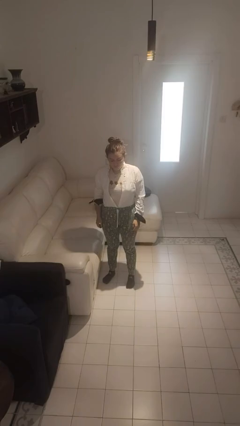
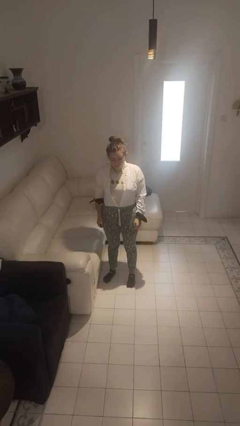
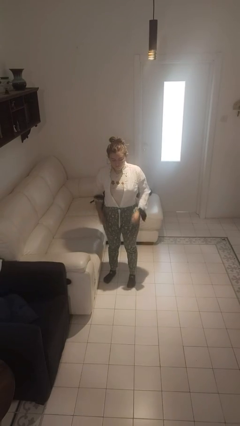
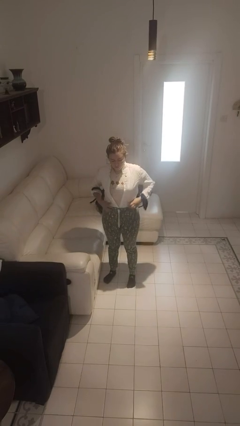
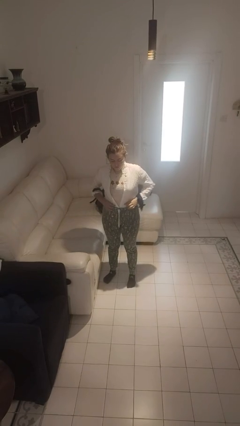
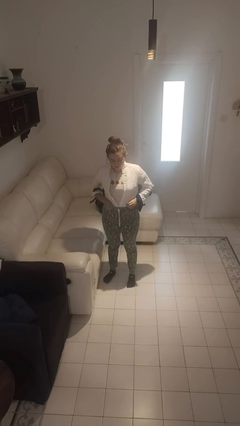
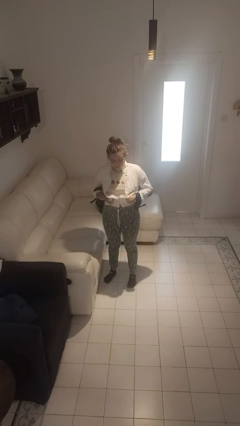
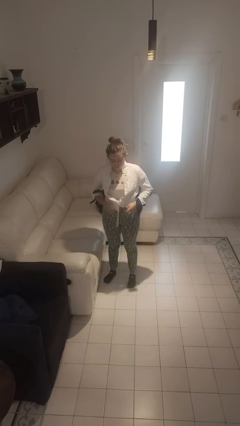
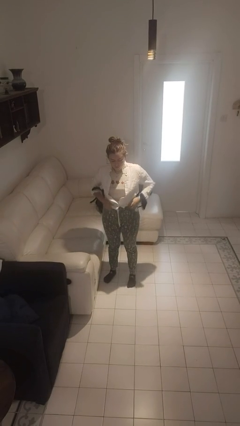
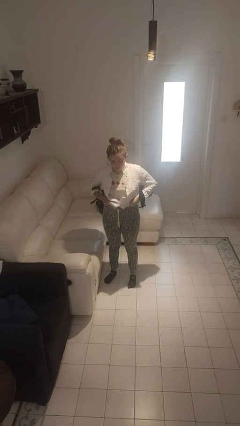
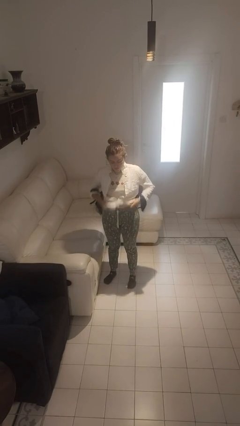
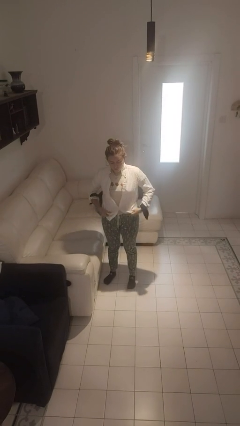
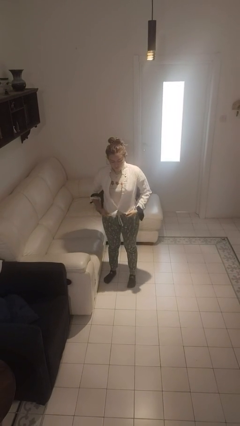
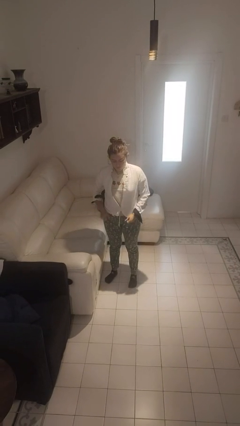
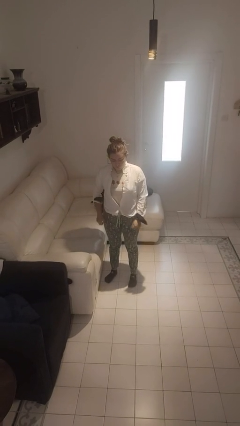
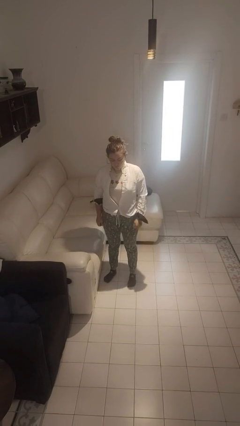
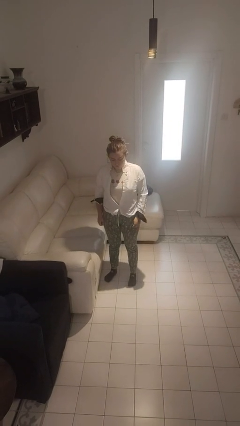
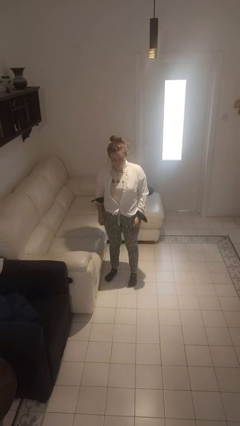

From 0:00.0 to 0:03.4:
person untucks shirt

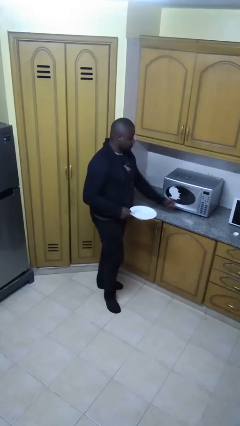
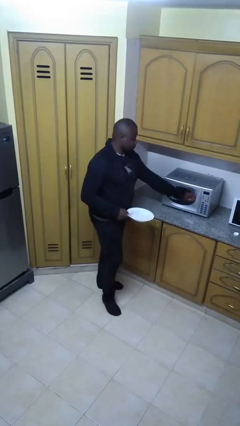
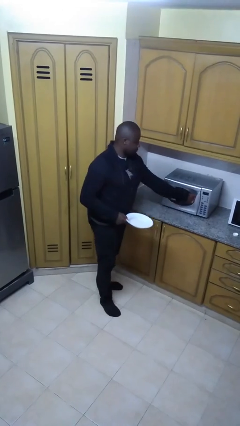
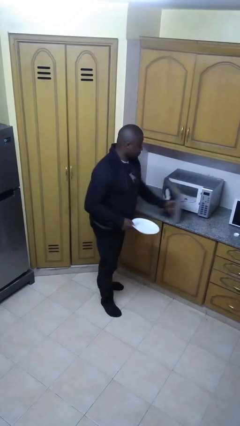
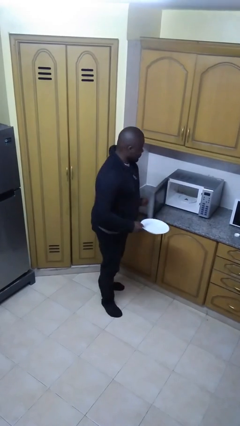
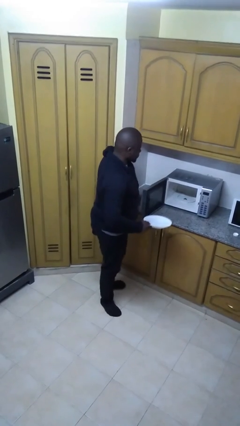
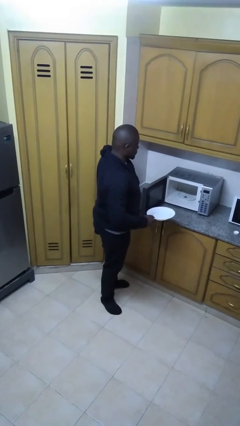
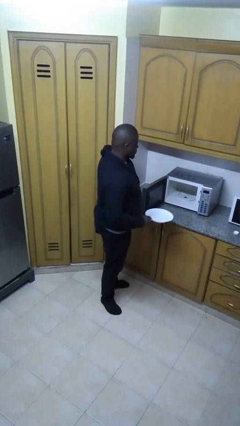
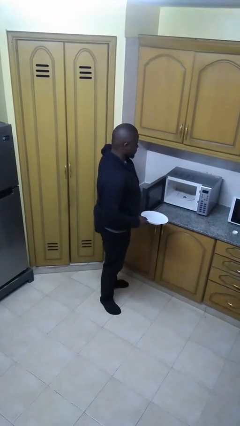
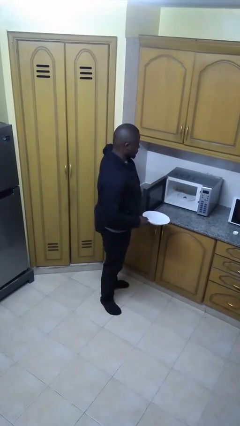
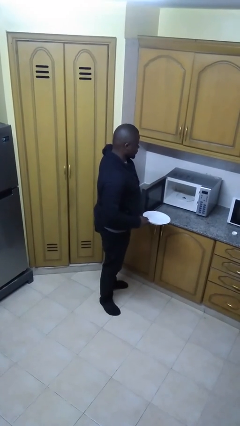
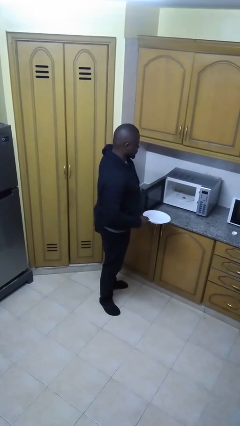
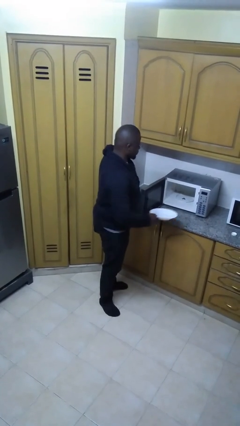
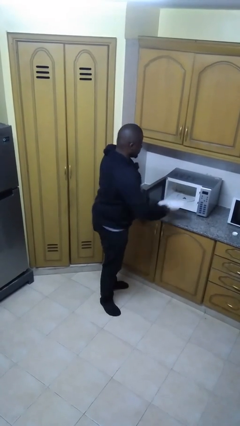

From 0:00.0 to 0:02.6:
person opens microwave

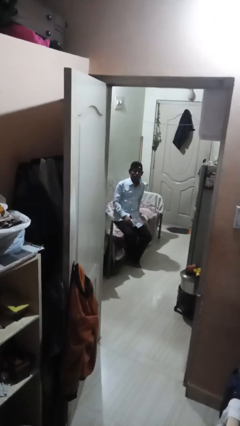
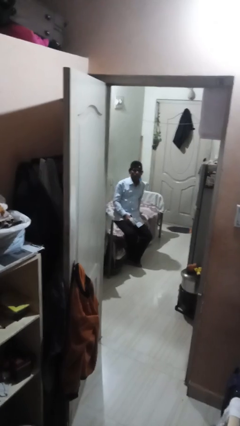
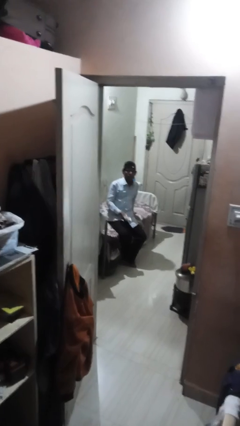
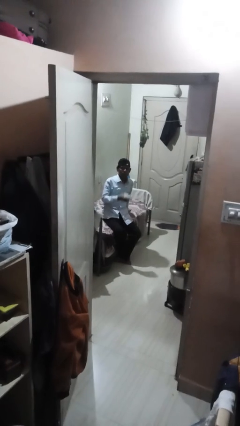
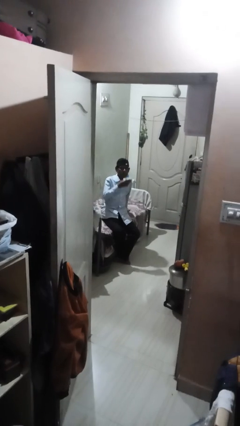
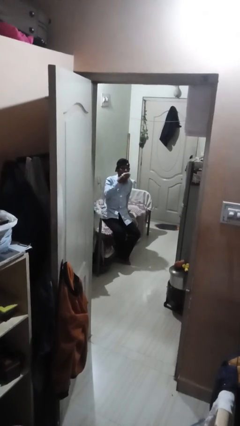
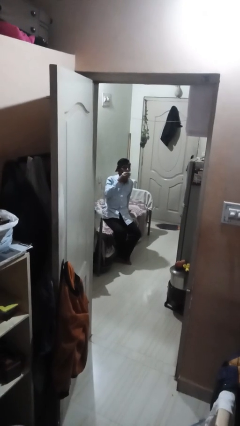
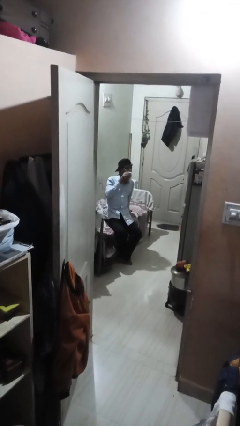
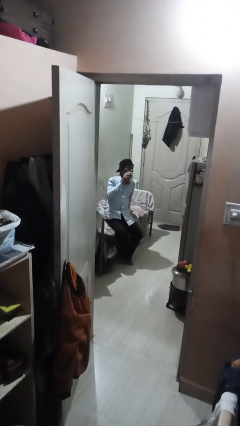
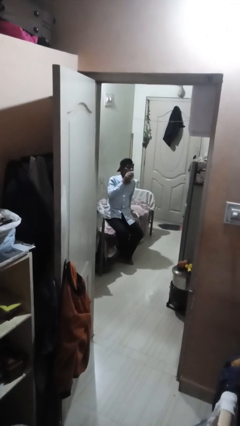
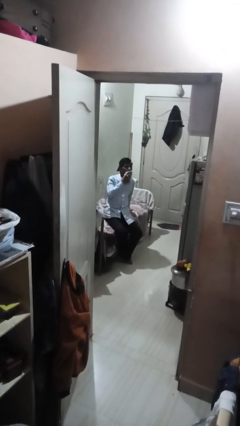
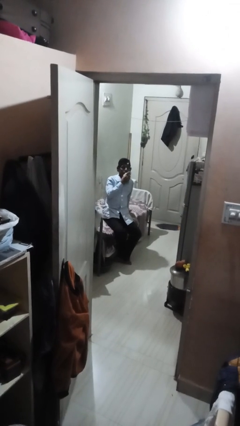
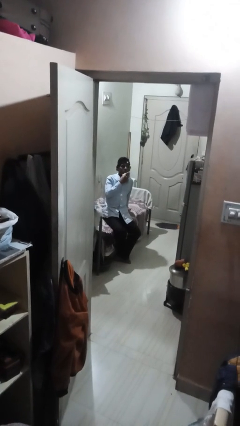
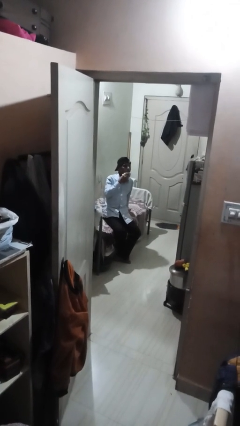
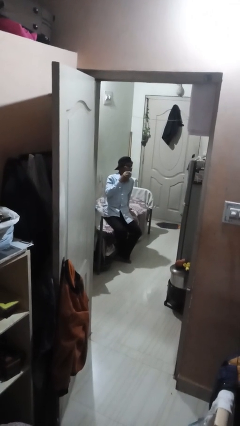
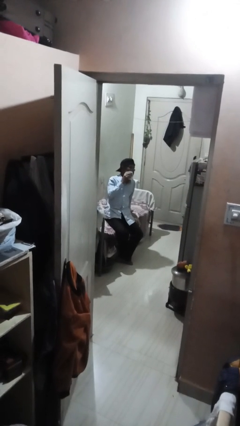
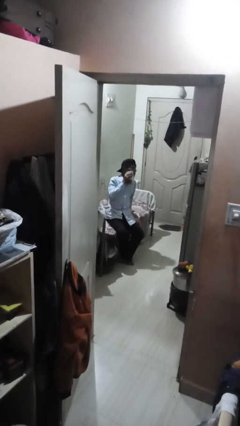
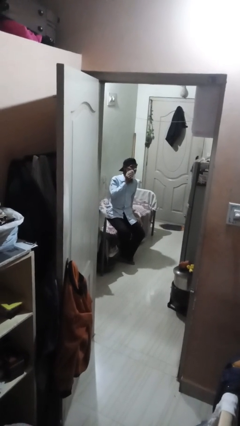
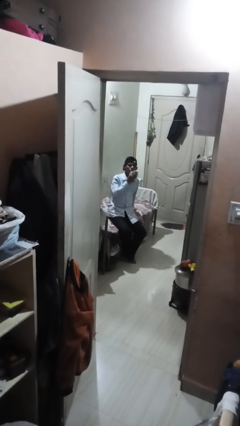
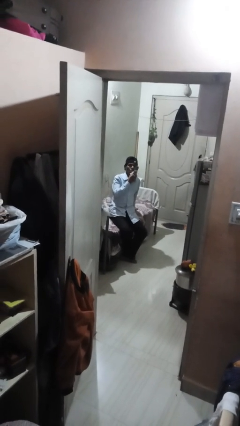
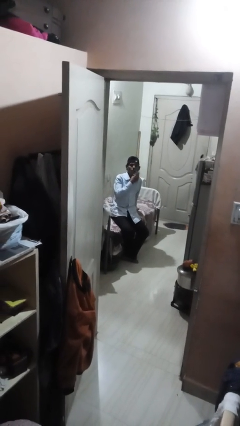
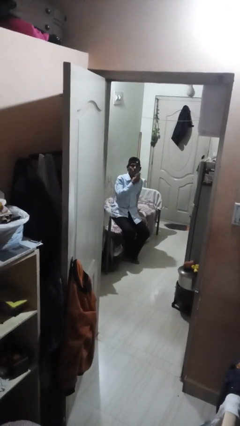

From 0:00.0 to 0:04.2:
person wipes mouth with napkin

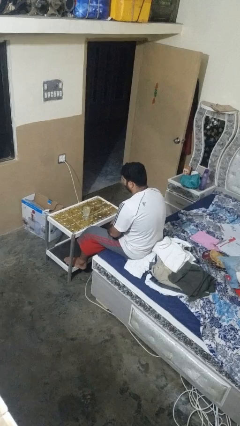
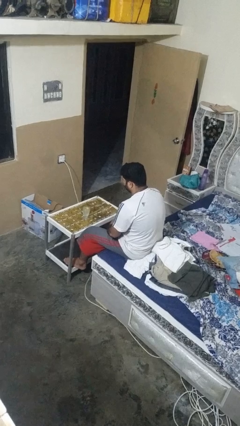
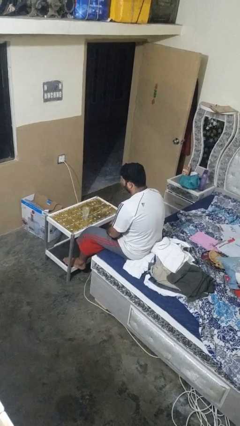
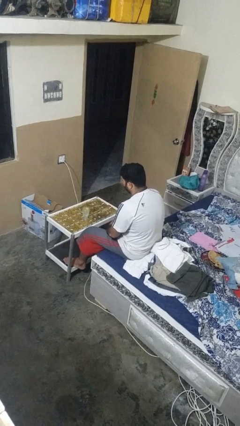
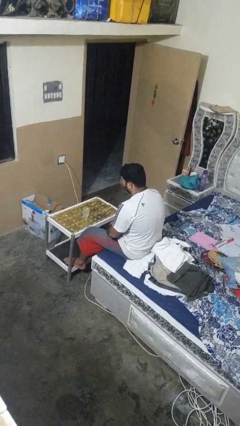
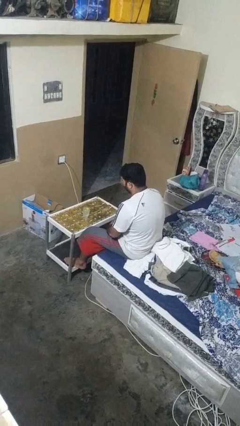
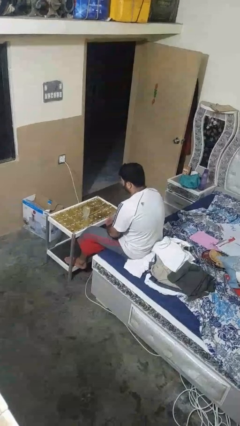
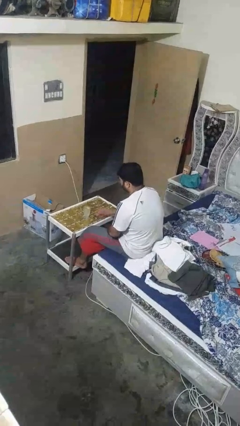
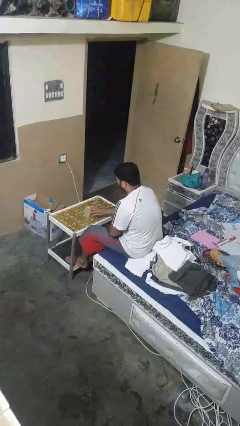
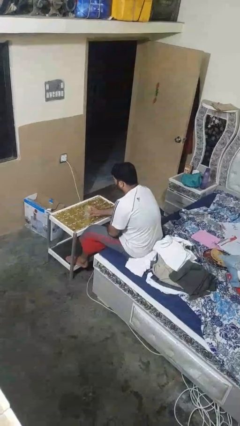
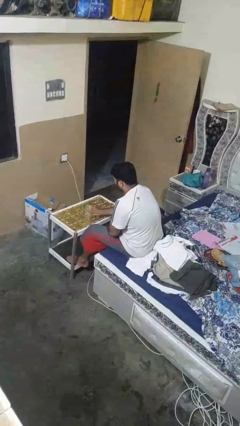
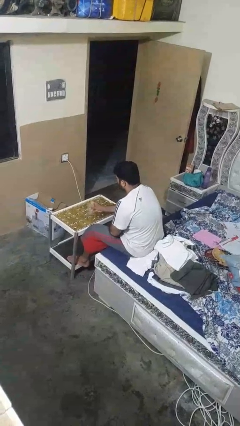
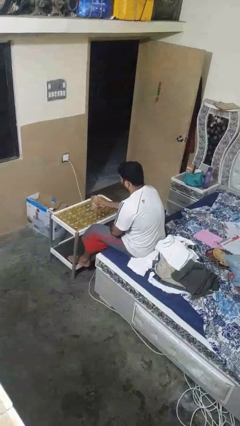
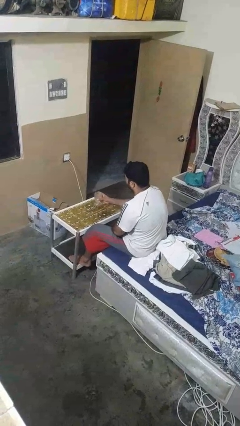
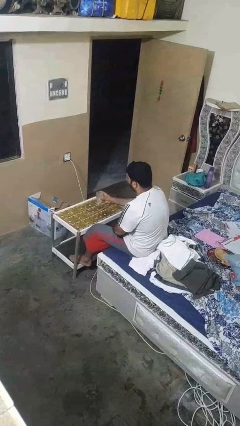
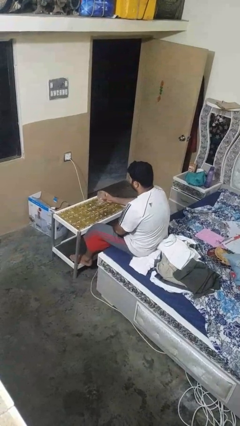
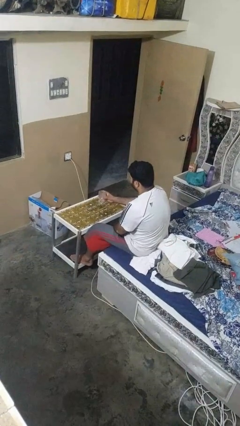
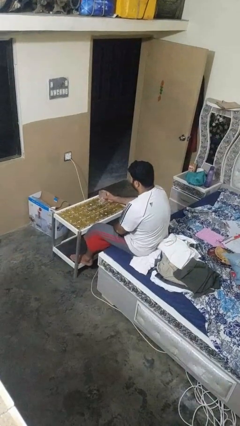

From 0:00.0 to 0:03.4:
person picks up object from table

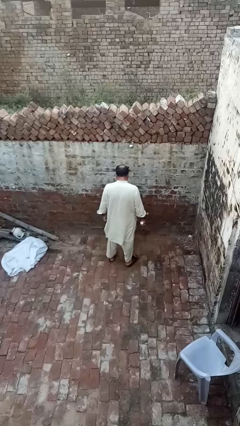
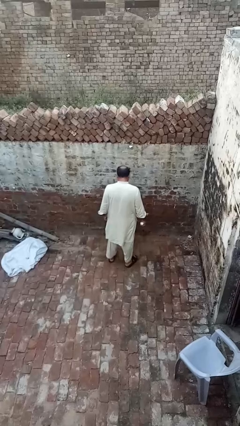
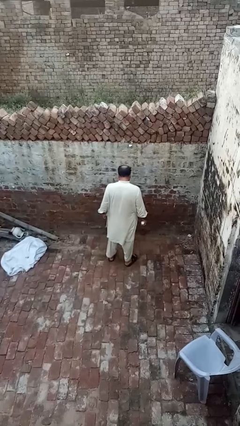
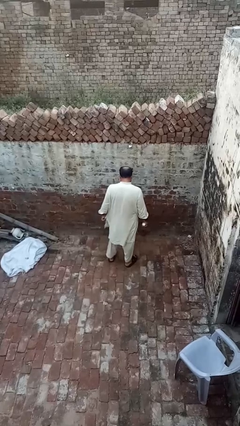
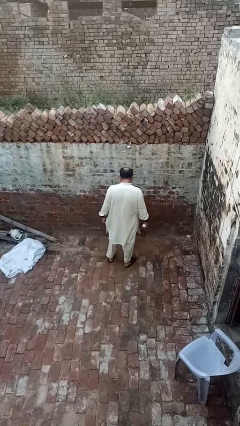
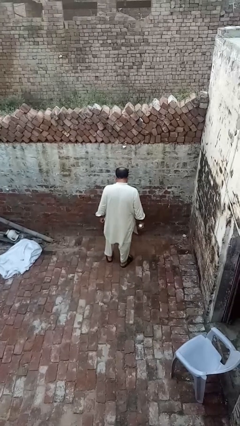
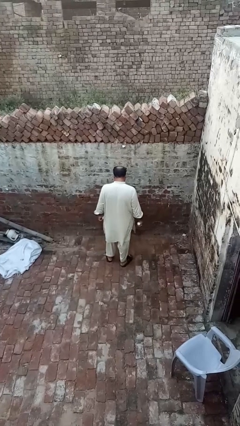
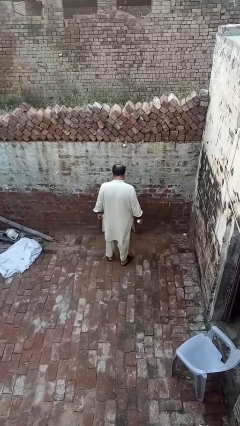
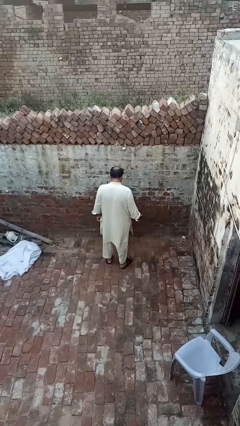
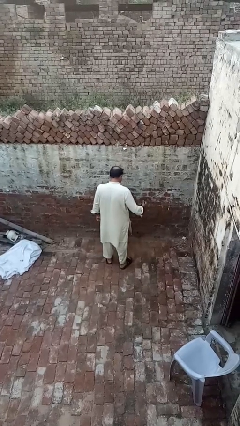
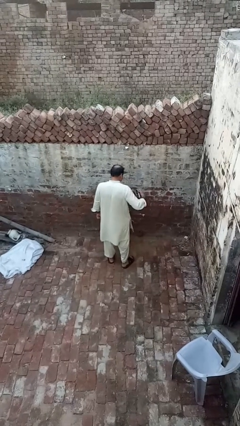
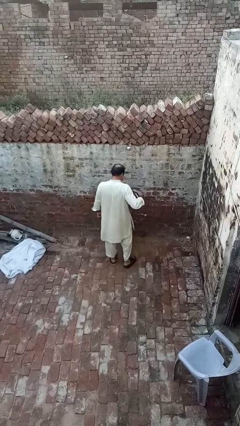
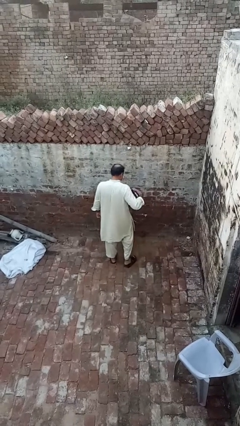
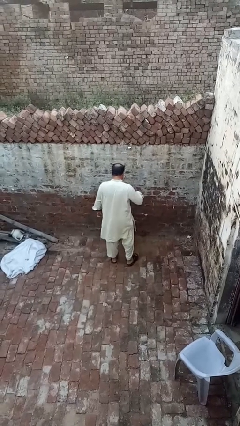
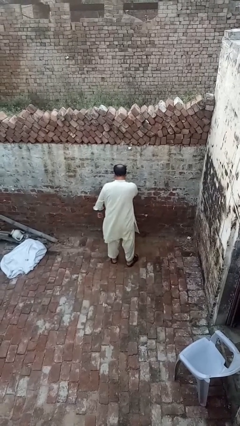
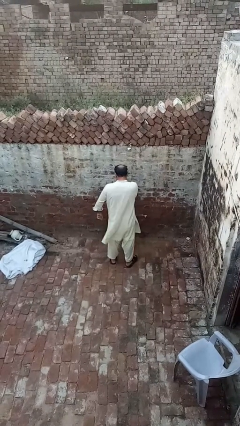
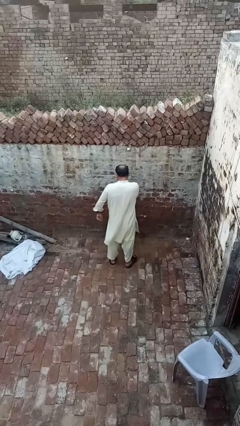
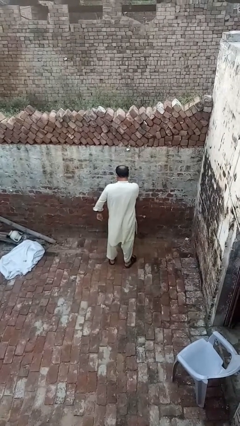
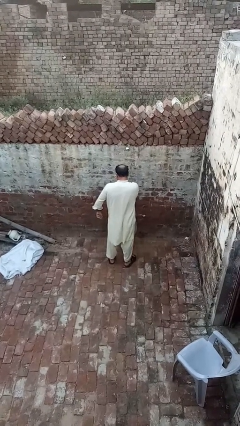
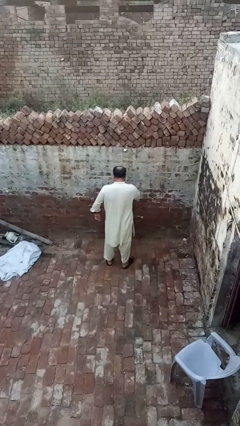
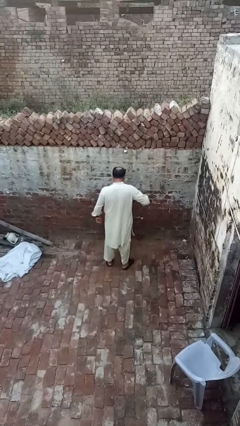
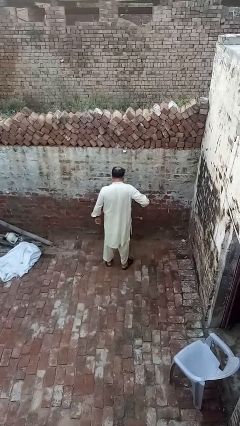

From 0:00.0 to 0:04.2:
person applies deodorant
